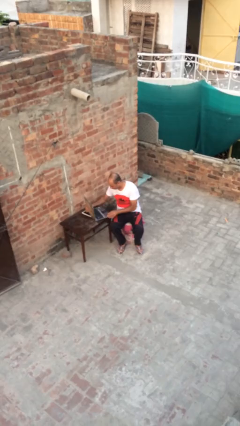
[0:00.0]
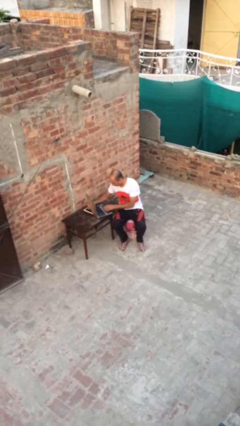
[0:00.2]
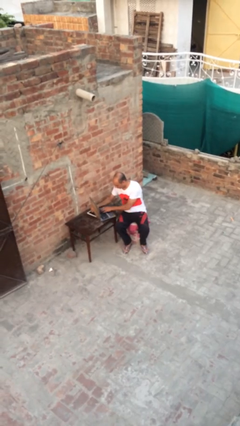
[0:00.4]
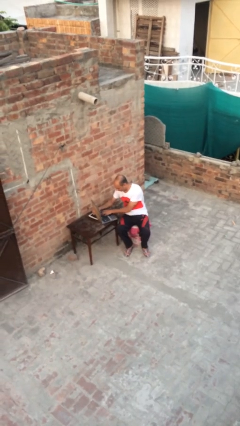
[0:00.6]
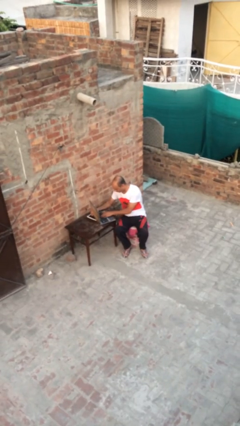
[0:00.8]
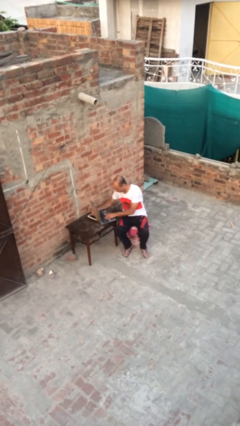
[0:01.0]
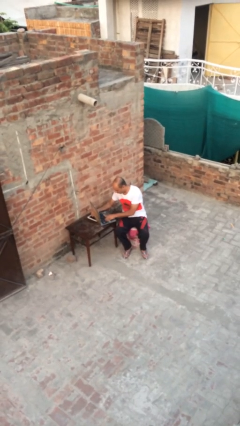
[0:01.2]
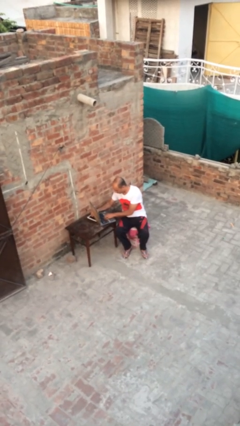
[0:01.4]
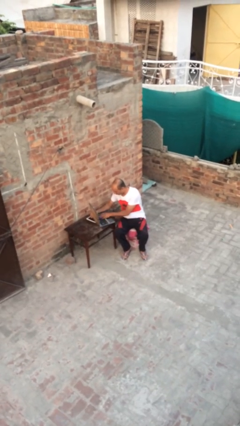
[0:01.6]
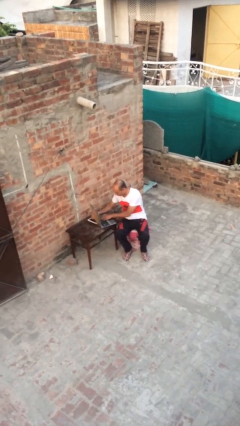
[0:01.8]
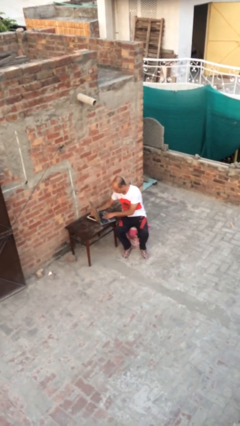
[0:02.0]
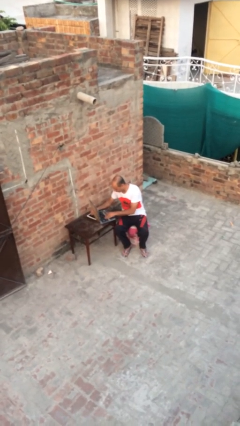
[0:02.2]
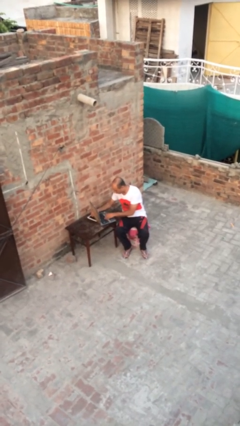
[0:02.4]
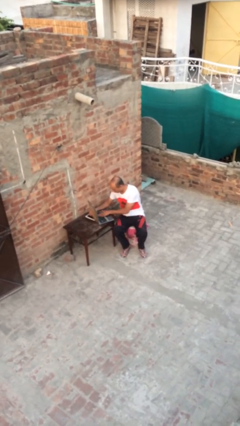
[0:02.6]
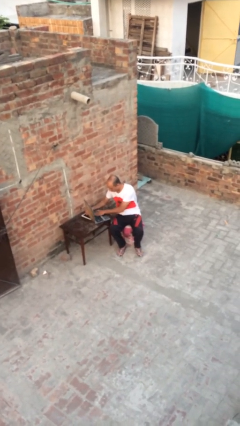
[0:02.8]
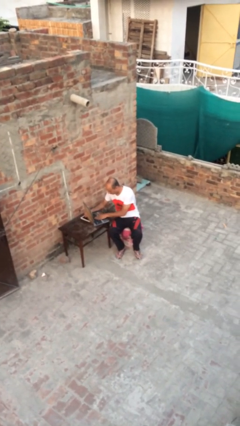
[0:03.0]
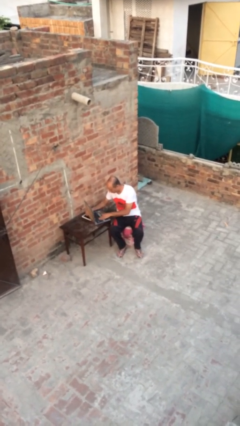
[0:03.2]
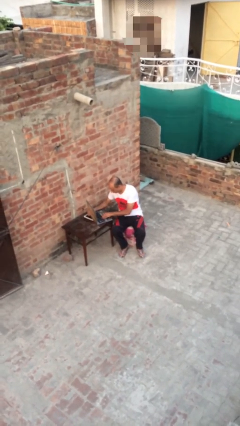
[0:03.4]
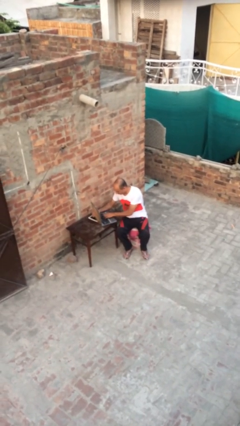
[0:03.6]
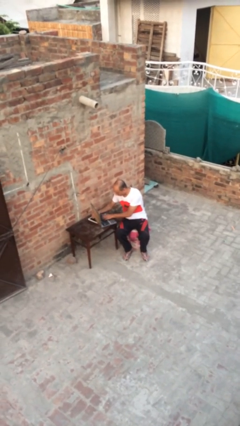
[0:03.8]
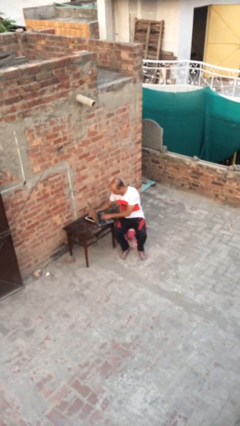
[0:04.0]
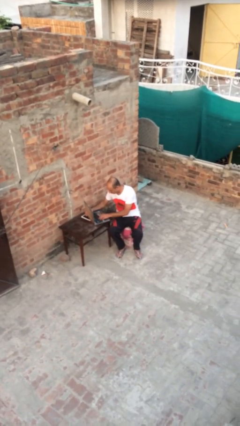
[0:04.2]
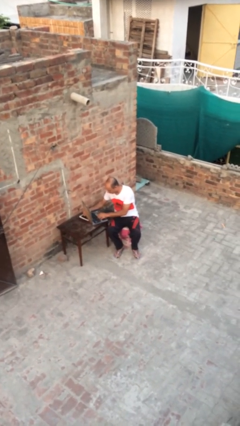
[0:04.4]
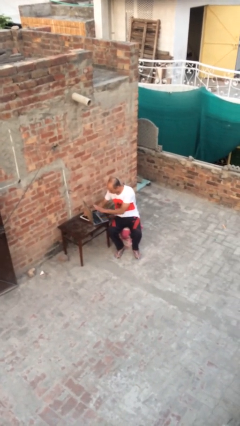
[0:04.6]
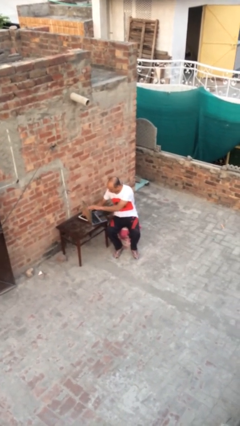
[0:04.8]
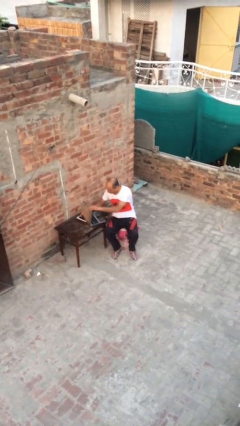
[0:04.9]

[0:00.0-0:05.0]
person interacts with laptop

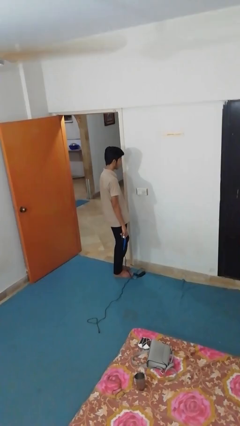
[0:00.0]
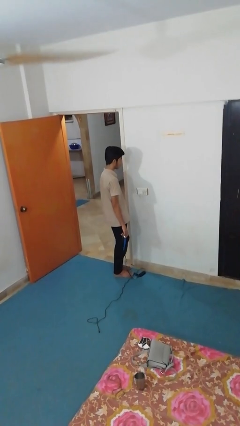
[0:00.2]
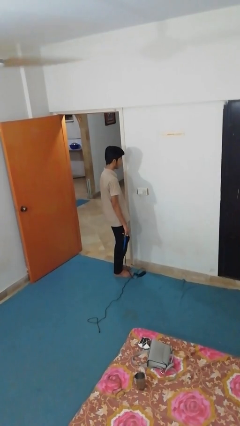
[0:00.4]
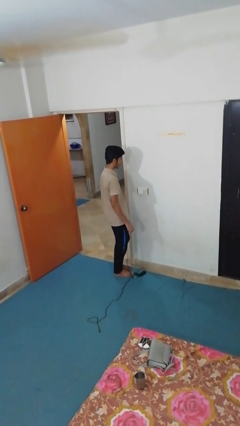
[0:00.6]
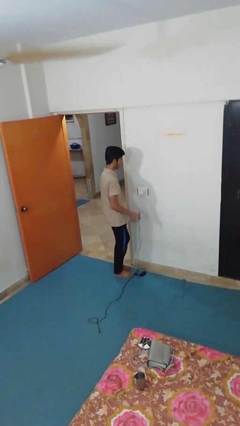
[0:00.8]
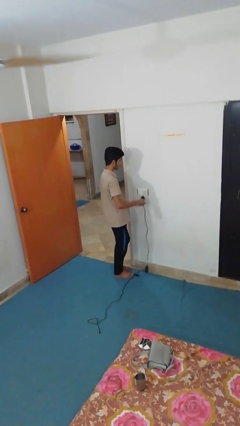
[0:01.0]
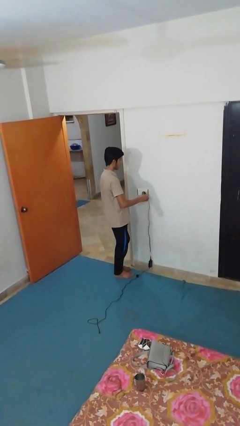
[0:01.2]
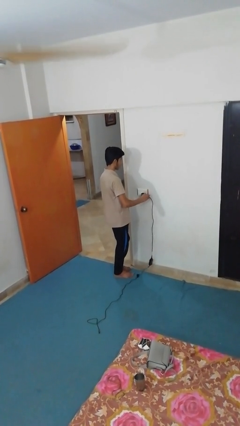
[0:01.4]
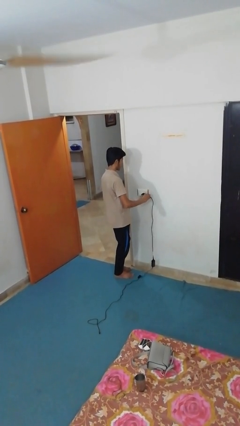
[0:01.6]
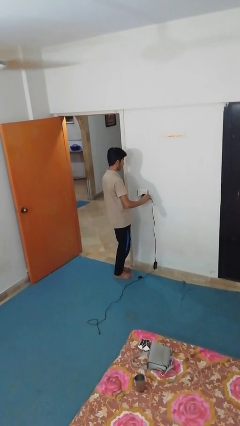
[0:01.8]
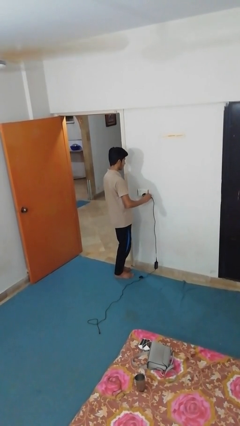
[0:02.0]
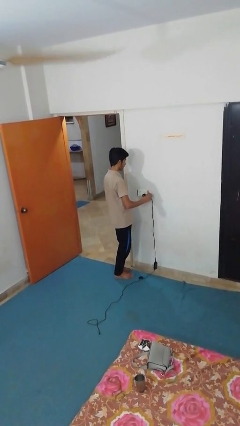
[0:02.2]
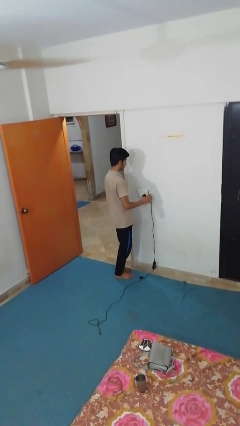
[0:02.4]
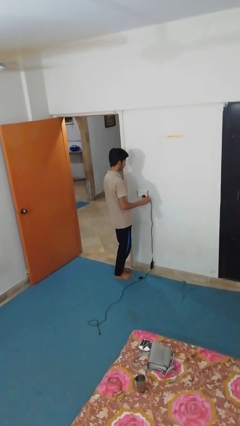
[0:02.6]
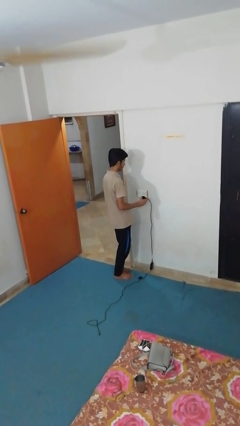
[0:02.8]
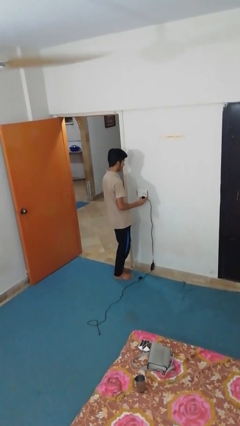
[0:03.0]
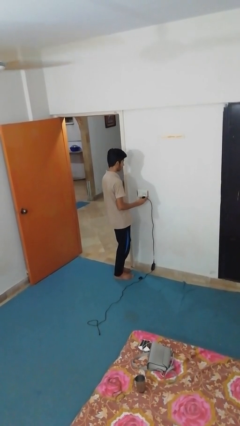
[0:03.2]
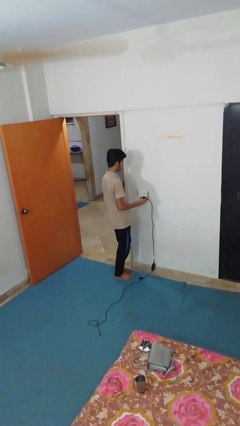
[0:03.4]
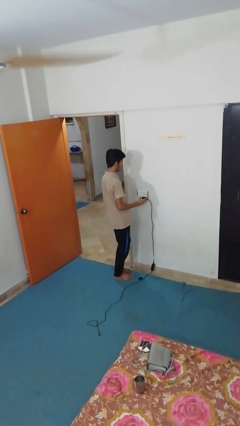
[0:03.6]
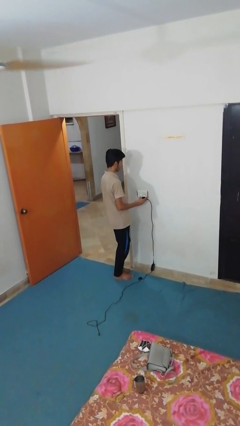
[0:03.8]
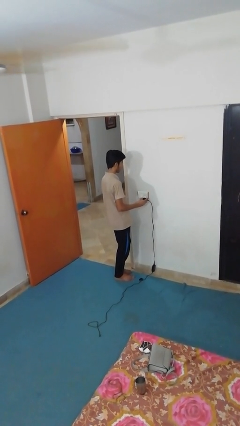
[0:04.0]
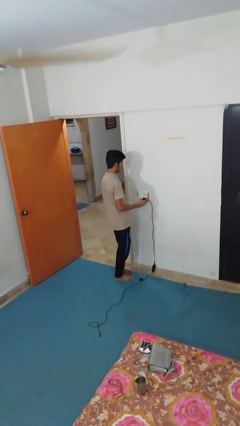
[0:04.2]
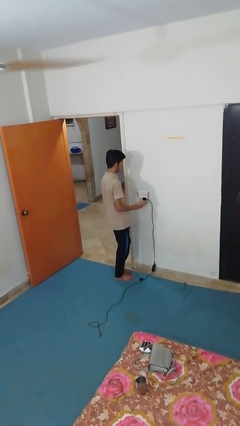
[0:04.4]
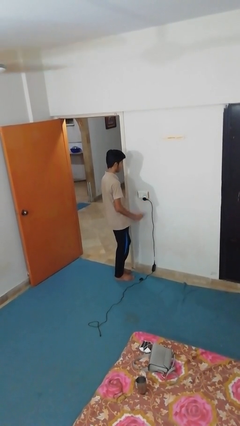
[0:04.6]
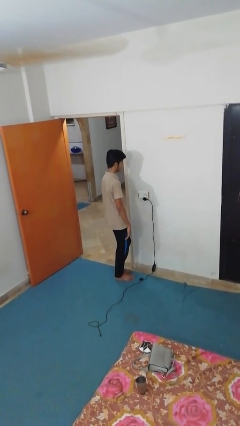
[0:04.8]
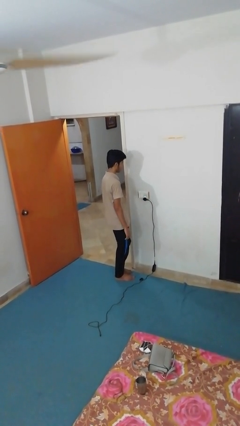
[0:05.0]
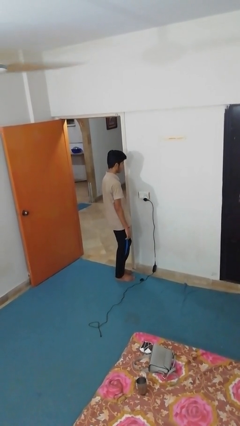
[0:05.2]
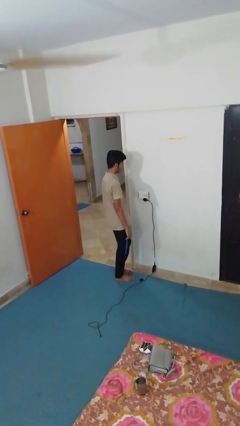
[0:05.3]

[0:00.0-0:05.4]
person plugs into electrical socket

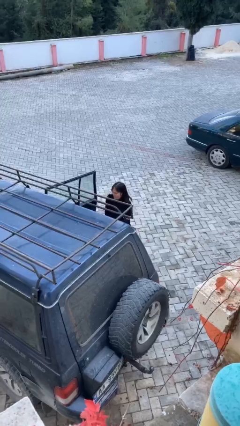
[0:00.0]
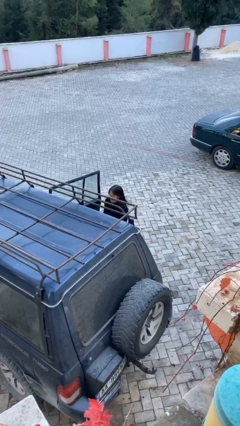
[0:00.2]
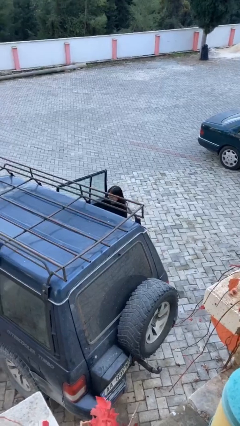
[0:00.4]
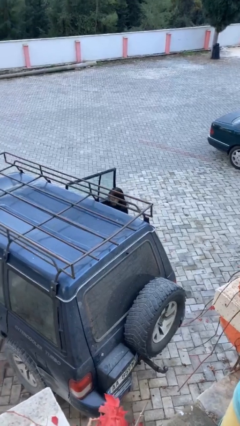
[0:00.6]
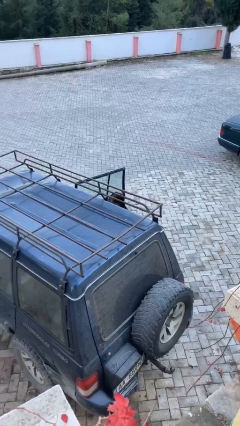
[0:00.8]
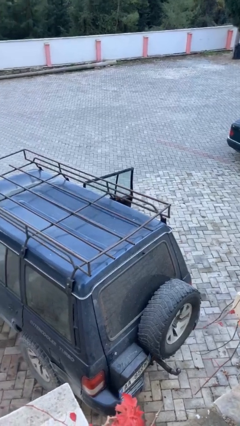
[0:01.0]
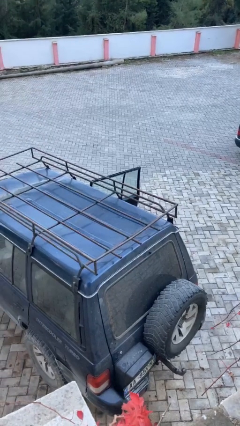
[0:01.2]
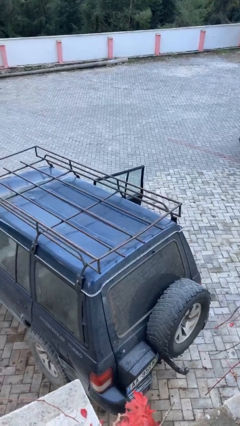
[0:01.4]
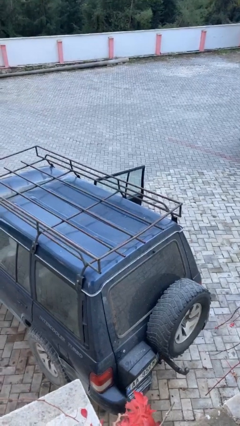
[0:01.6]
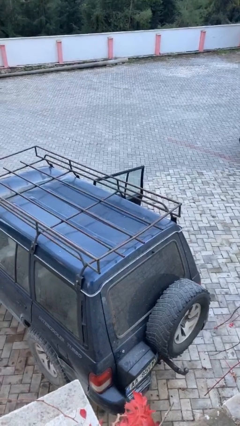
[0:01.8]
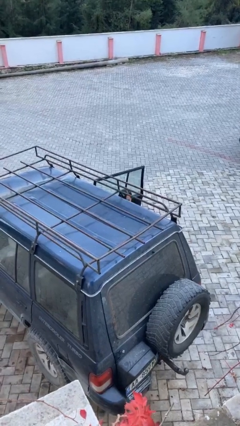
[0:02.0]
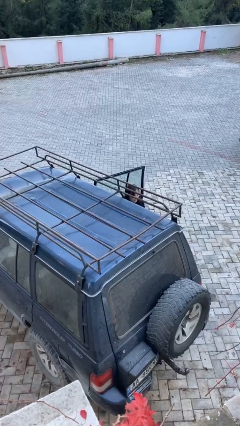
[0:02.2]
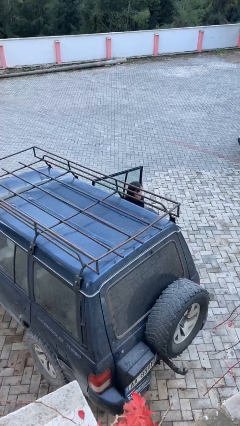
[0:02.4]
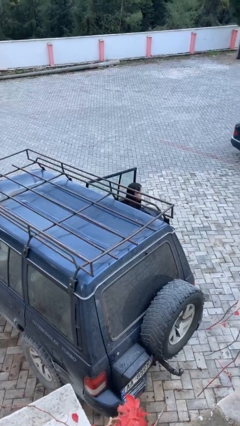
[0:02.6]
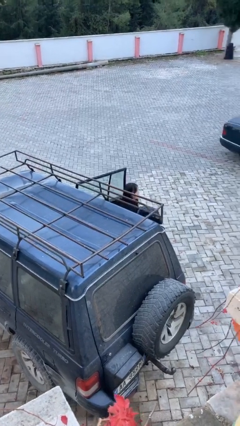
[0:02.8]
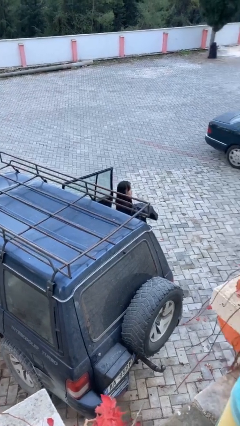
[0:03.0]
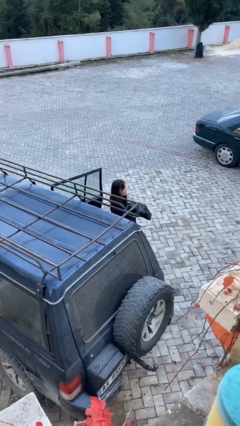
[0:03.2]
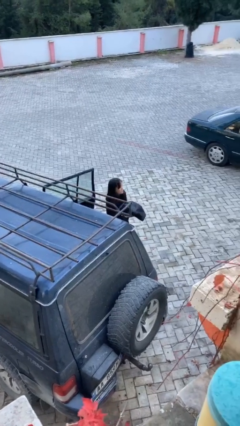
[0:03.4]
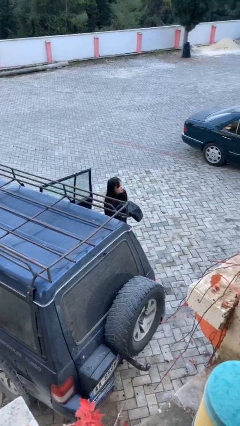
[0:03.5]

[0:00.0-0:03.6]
person unloads car

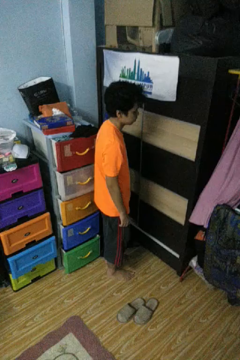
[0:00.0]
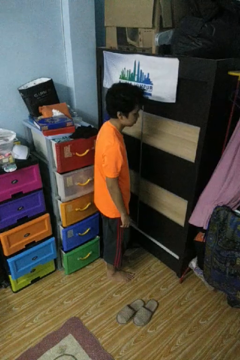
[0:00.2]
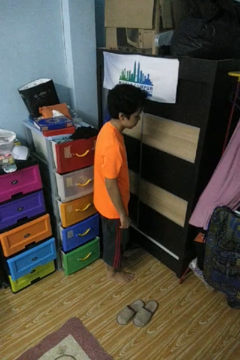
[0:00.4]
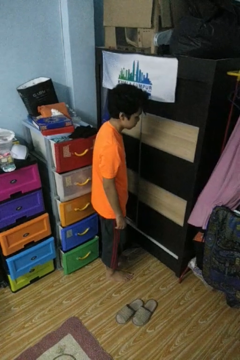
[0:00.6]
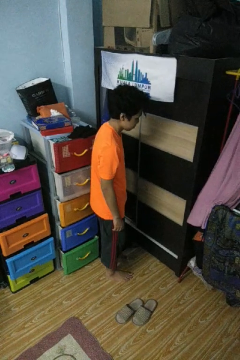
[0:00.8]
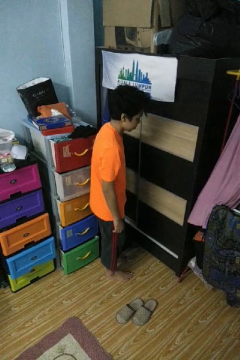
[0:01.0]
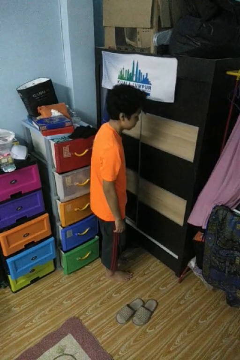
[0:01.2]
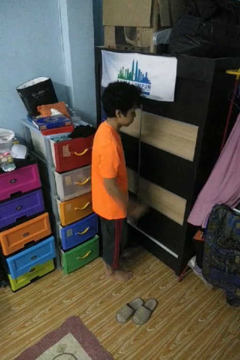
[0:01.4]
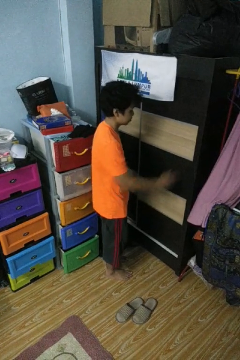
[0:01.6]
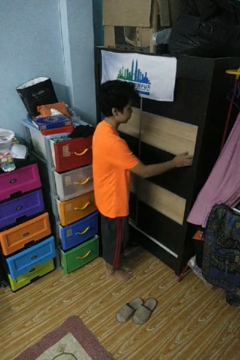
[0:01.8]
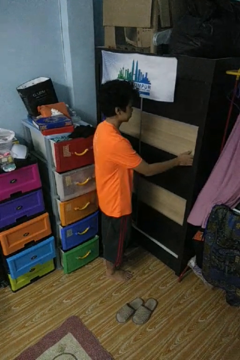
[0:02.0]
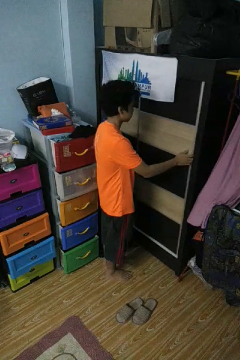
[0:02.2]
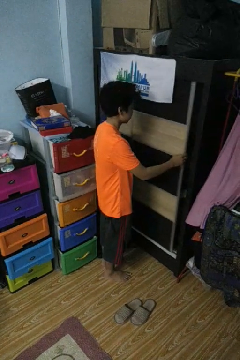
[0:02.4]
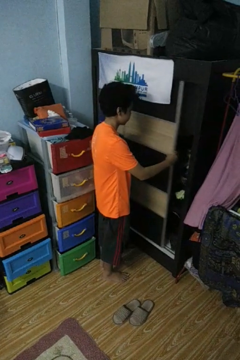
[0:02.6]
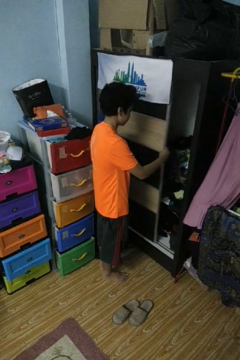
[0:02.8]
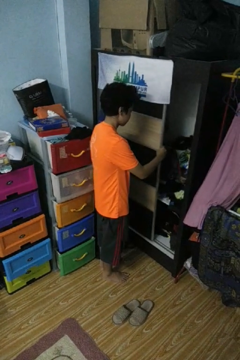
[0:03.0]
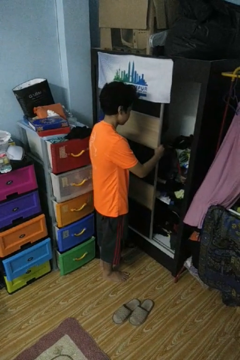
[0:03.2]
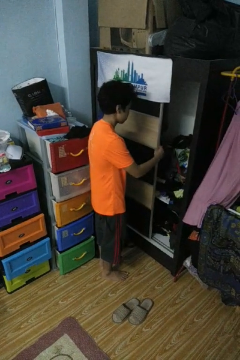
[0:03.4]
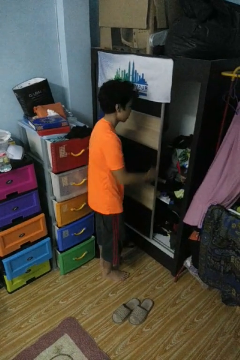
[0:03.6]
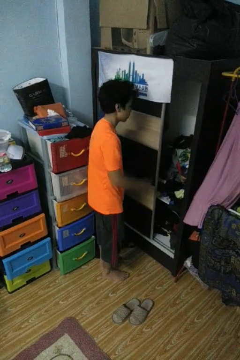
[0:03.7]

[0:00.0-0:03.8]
person opens closet door

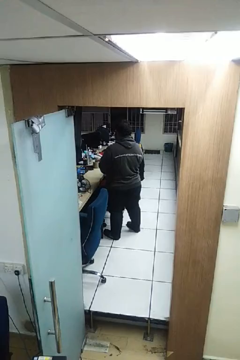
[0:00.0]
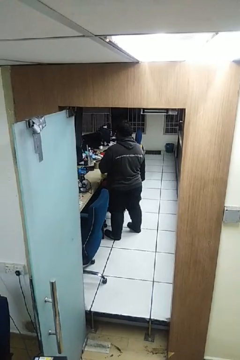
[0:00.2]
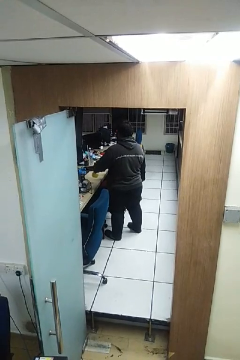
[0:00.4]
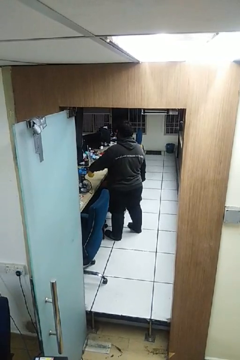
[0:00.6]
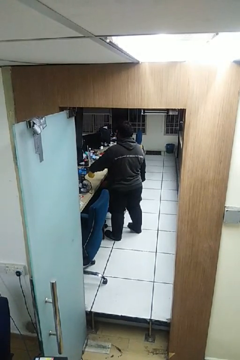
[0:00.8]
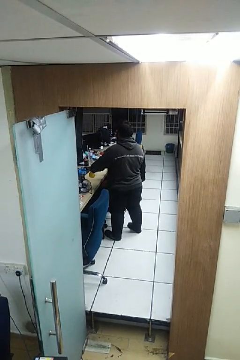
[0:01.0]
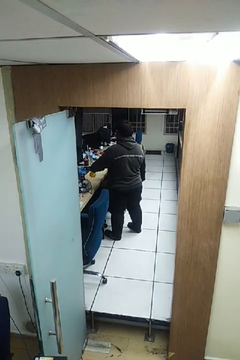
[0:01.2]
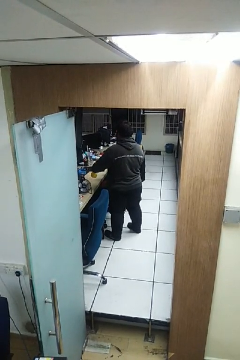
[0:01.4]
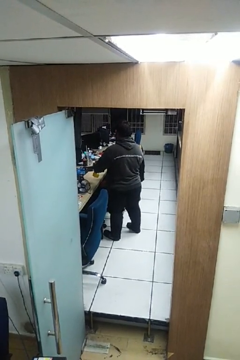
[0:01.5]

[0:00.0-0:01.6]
person sprays from bottle
